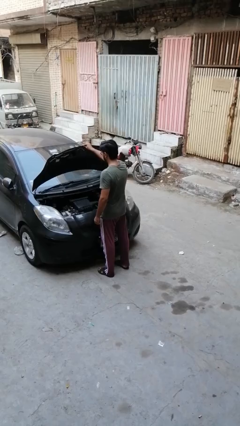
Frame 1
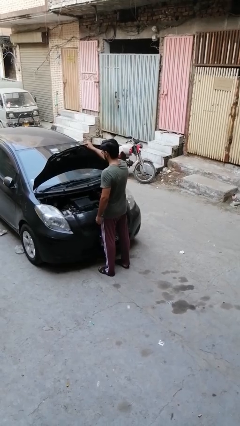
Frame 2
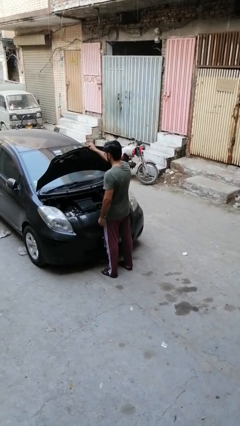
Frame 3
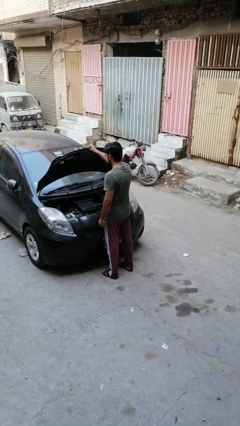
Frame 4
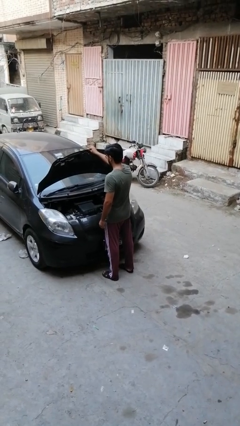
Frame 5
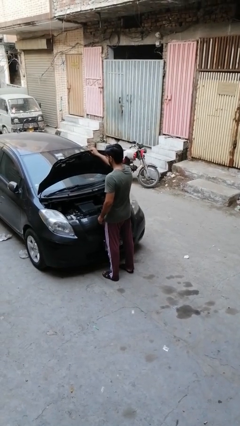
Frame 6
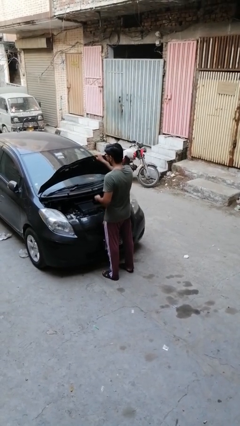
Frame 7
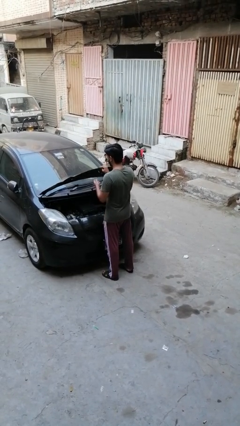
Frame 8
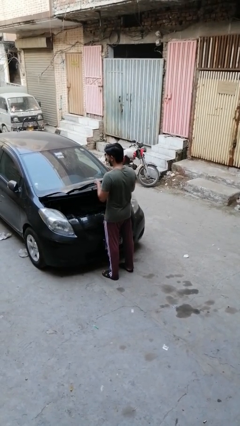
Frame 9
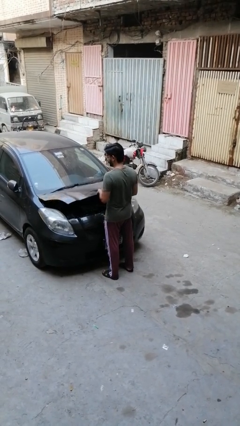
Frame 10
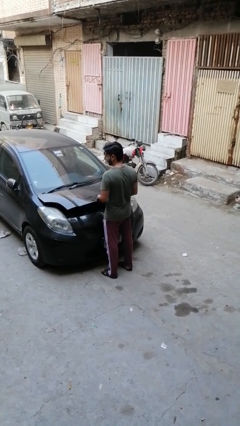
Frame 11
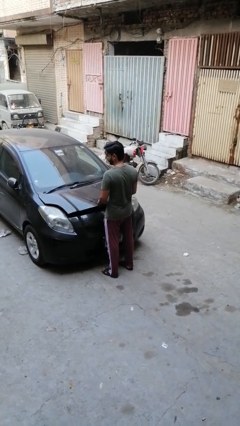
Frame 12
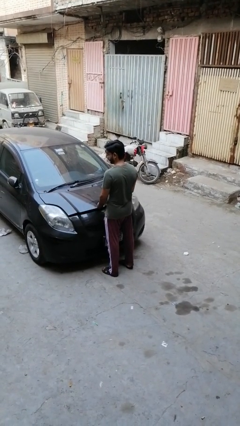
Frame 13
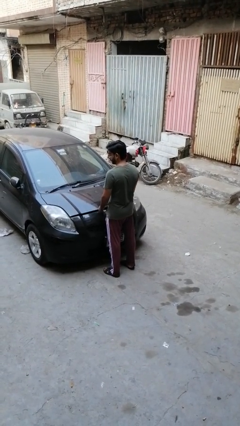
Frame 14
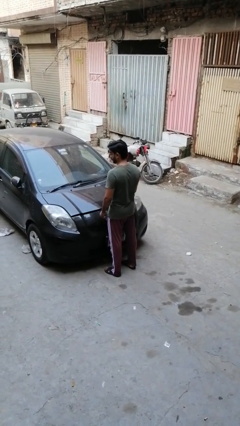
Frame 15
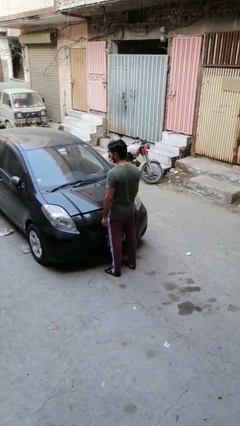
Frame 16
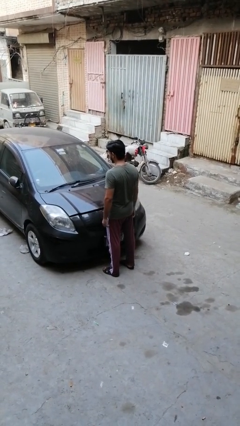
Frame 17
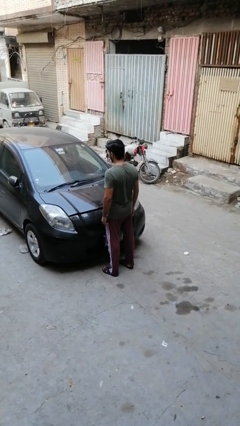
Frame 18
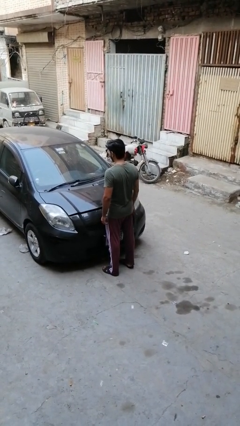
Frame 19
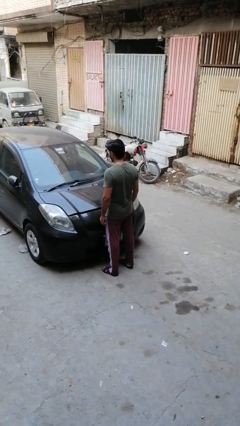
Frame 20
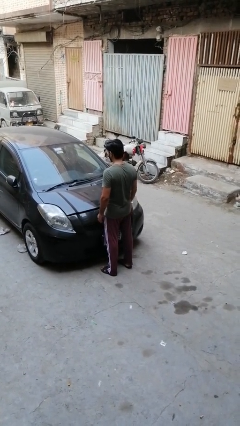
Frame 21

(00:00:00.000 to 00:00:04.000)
person closes car hood

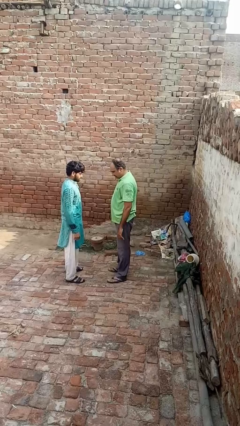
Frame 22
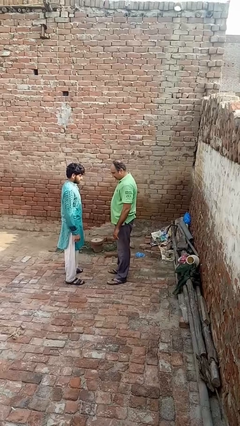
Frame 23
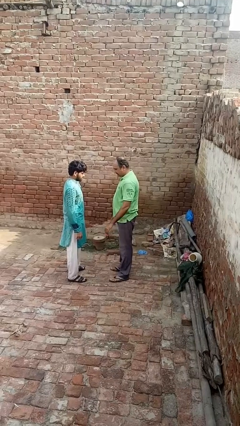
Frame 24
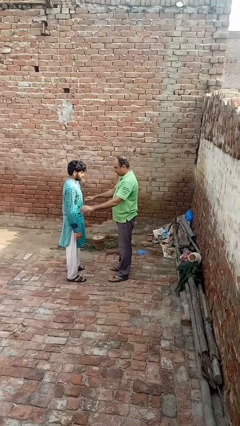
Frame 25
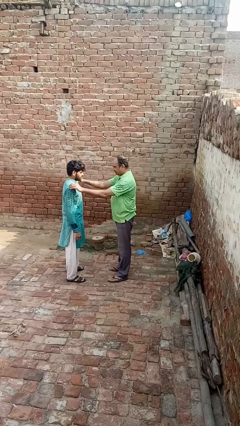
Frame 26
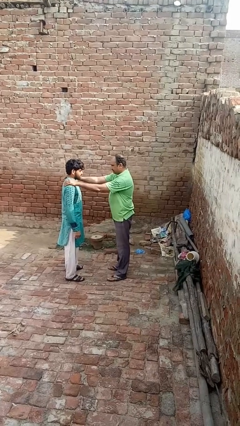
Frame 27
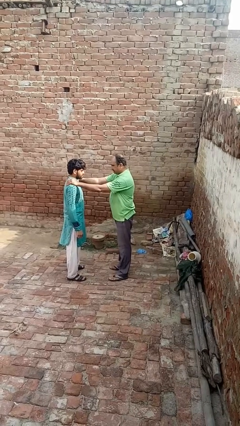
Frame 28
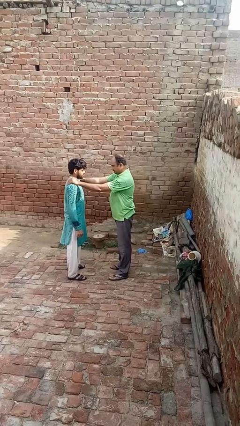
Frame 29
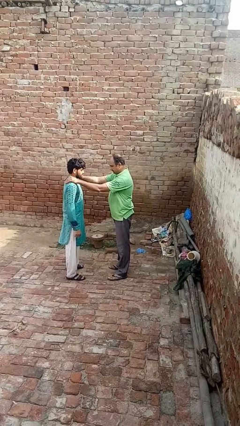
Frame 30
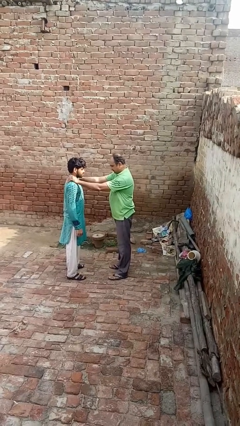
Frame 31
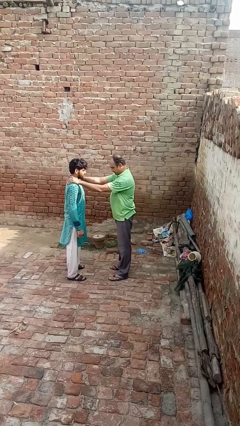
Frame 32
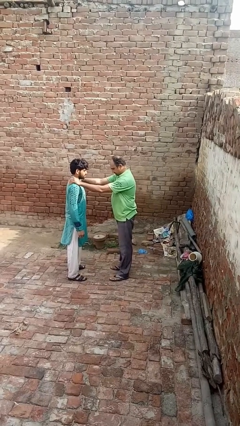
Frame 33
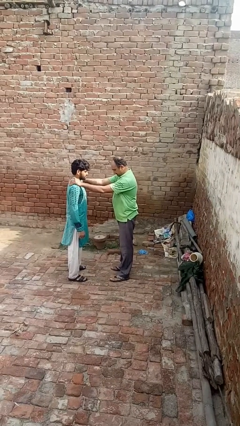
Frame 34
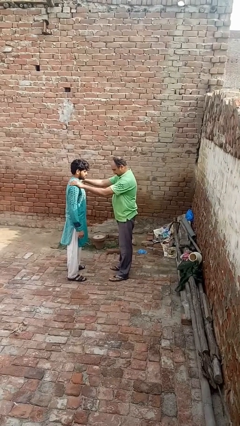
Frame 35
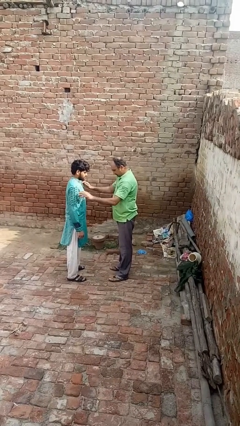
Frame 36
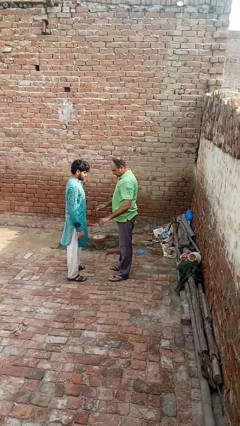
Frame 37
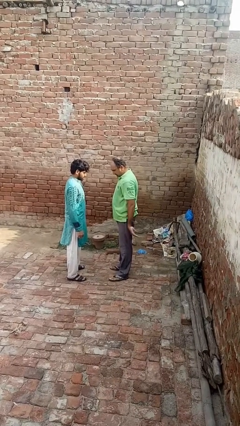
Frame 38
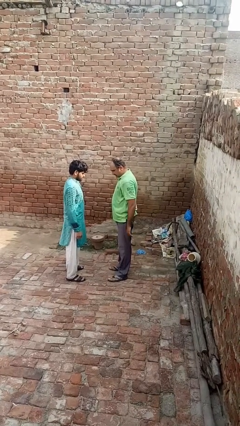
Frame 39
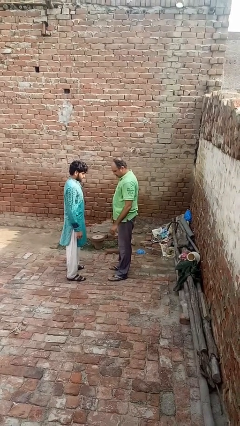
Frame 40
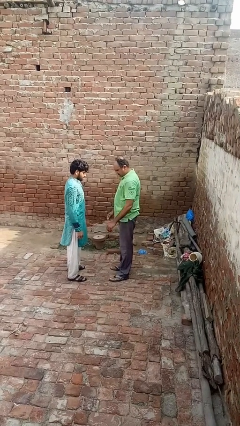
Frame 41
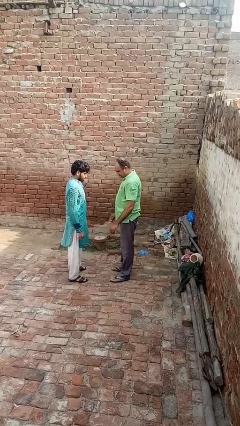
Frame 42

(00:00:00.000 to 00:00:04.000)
person pounds shoulders of person

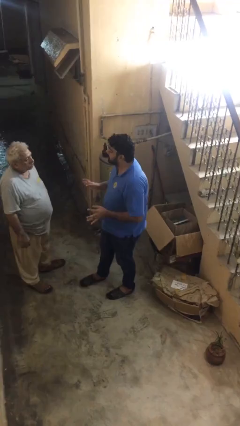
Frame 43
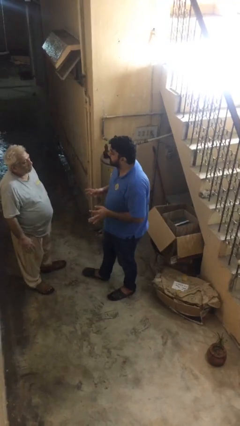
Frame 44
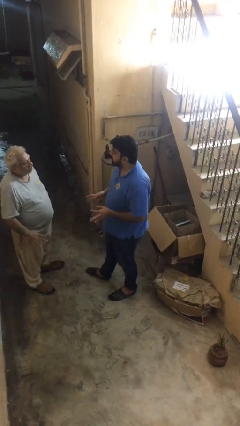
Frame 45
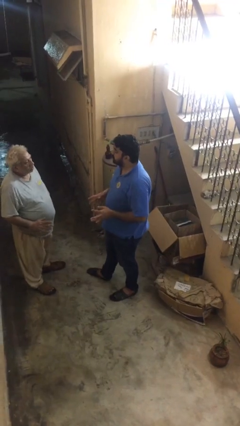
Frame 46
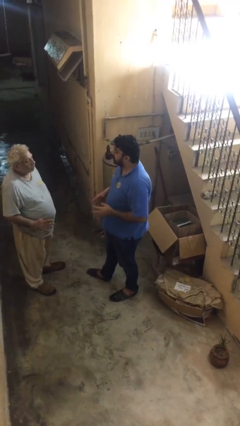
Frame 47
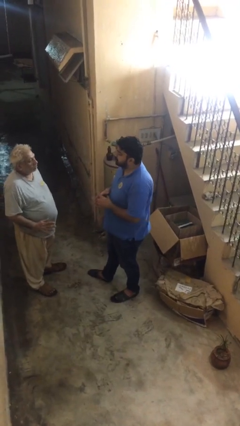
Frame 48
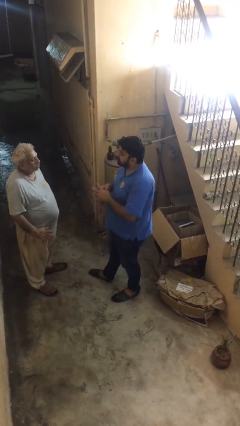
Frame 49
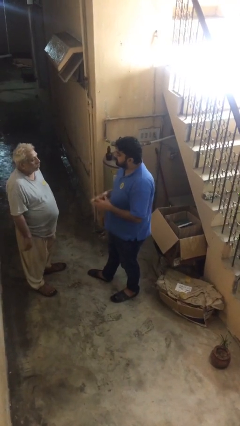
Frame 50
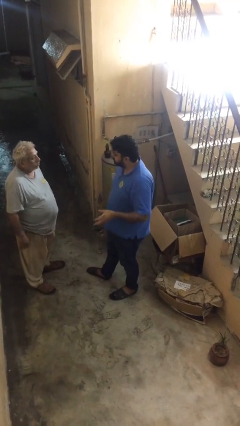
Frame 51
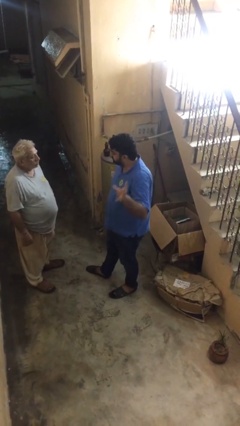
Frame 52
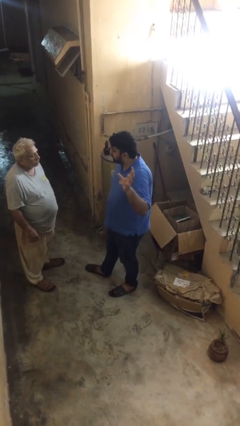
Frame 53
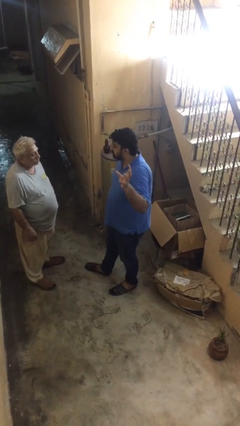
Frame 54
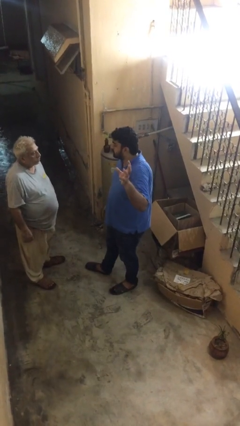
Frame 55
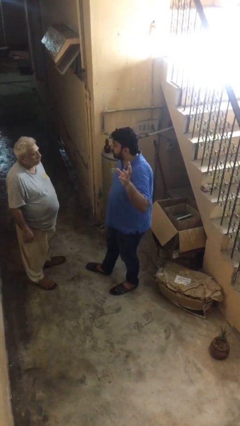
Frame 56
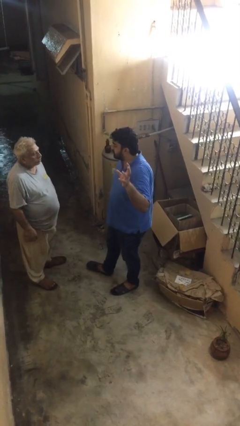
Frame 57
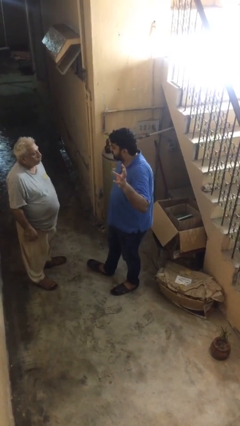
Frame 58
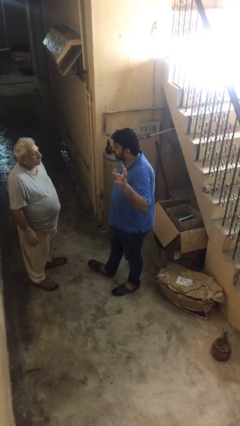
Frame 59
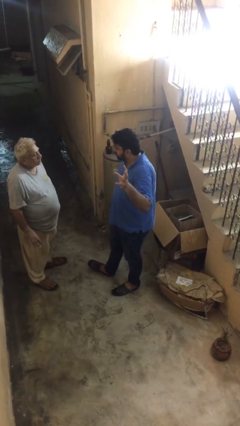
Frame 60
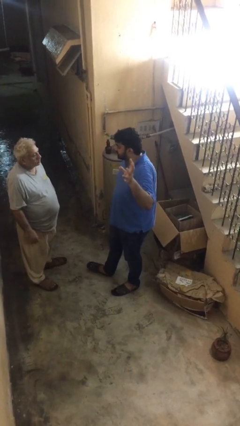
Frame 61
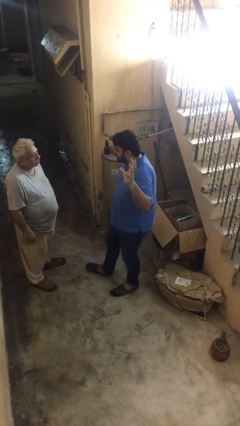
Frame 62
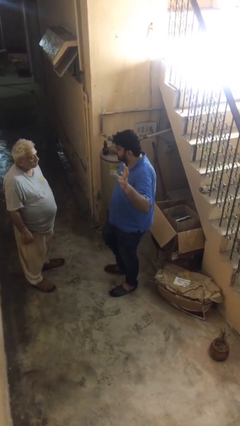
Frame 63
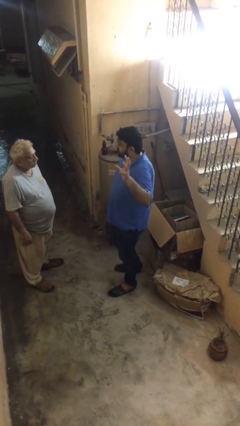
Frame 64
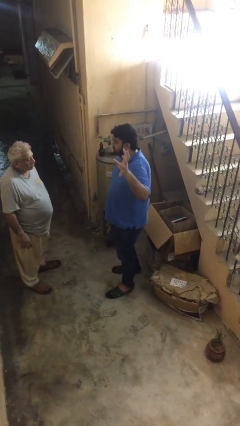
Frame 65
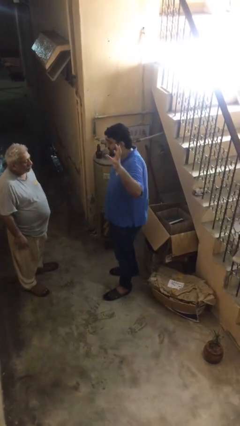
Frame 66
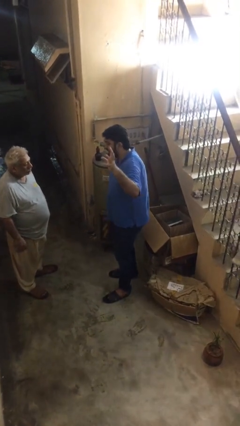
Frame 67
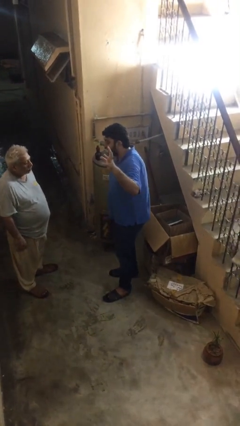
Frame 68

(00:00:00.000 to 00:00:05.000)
person talks to person

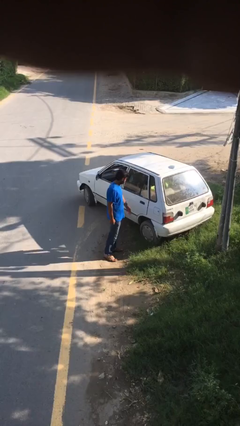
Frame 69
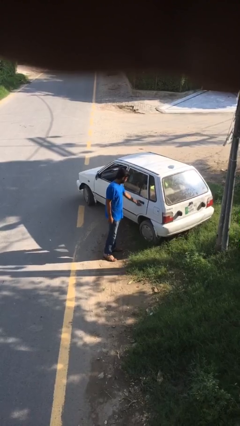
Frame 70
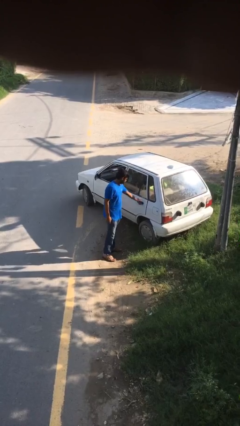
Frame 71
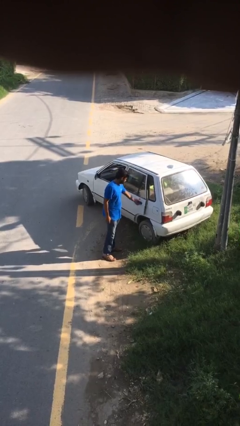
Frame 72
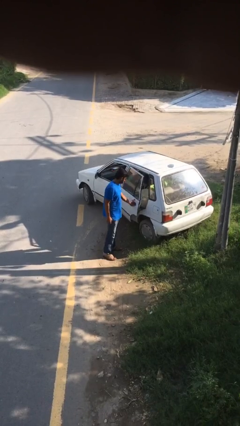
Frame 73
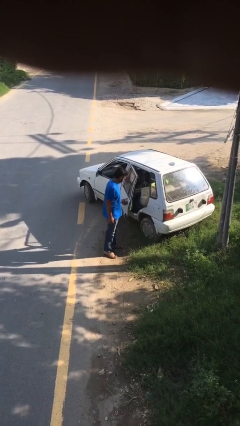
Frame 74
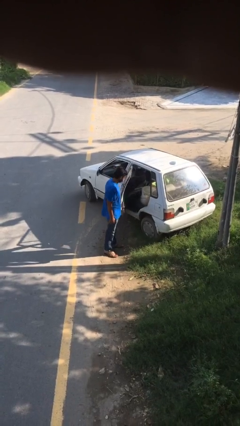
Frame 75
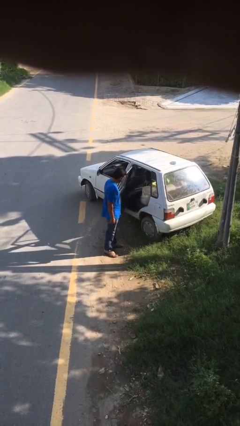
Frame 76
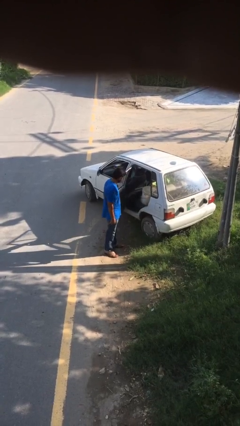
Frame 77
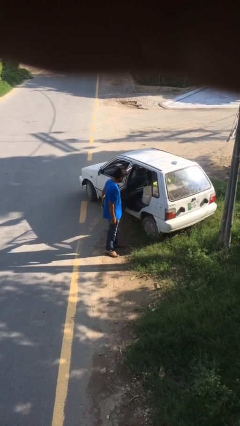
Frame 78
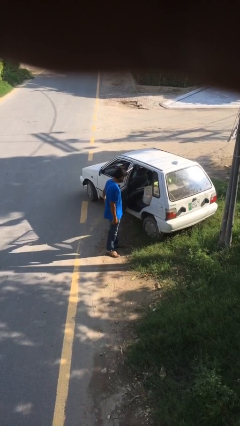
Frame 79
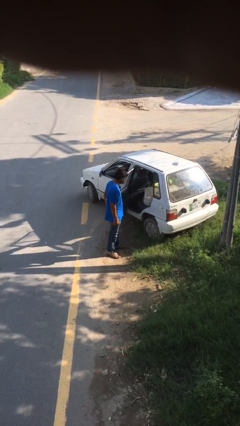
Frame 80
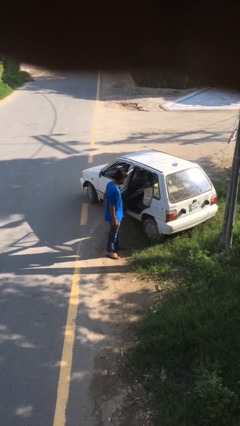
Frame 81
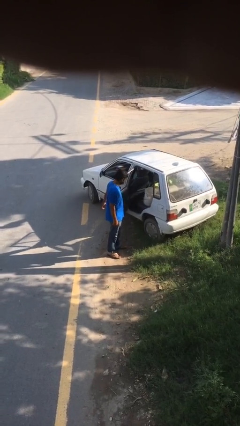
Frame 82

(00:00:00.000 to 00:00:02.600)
person opens car door

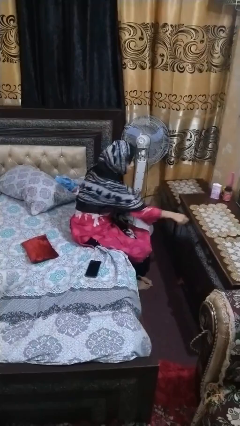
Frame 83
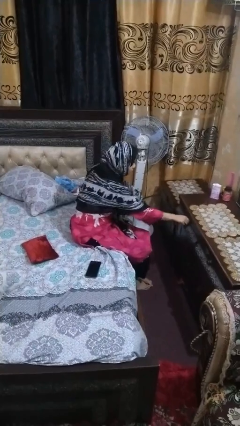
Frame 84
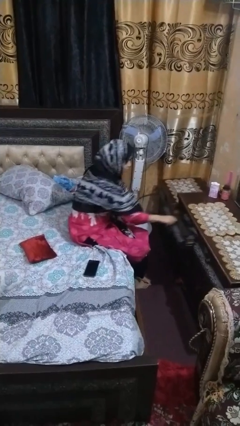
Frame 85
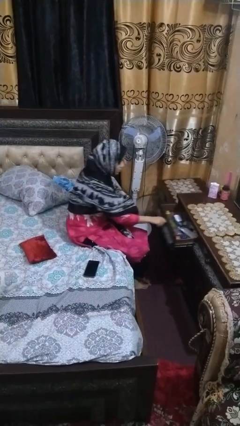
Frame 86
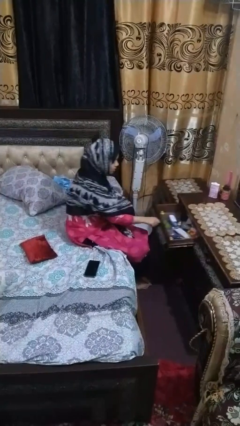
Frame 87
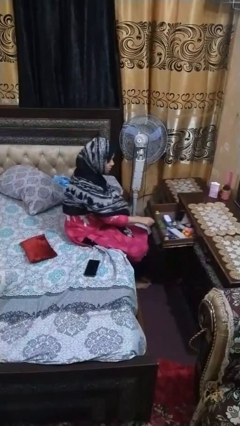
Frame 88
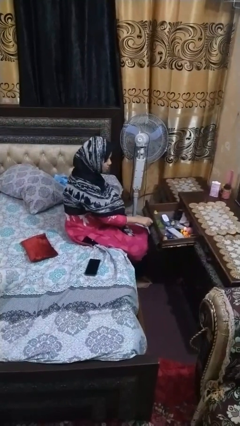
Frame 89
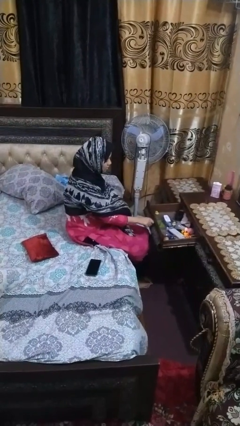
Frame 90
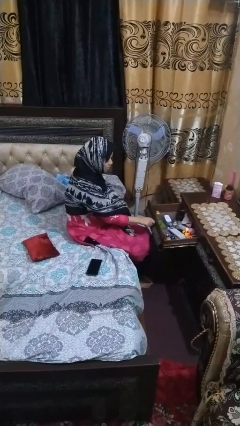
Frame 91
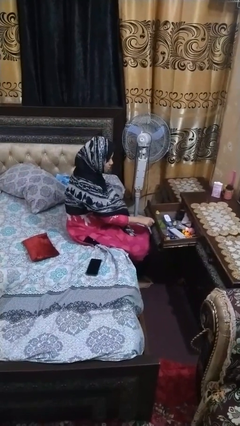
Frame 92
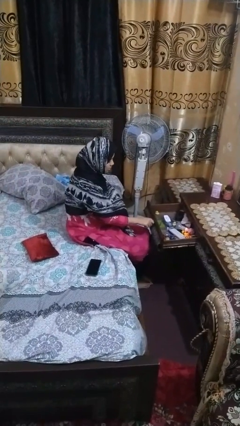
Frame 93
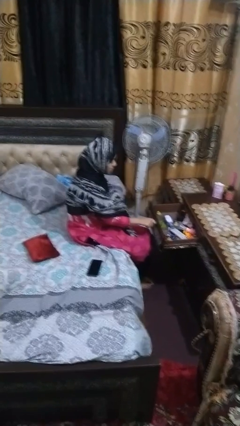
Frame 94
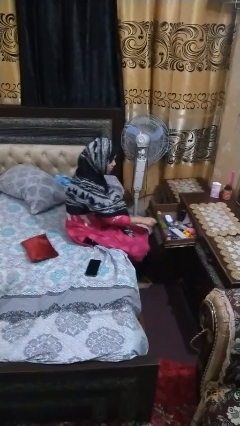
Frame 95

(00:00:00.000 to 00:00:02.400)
person opens dresser drawer
